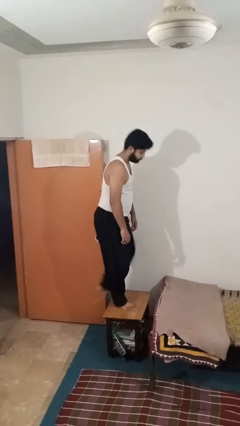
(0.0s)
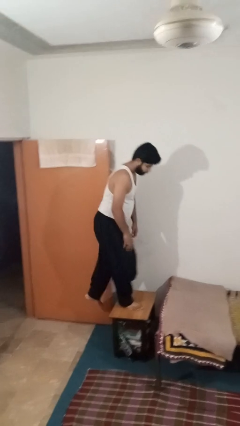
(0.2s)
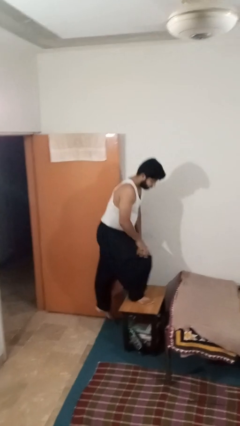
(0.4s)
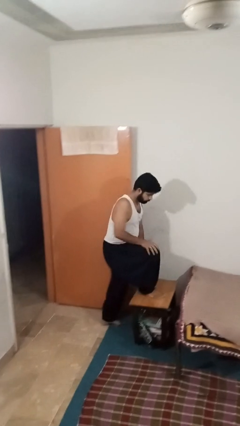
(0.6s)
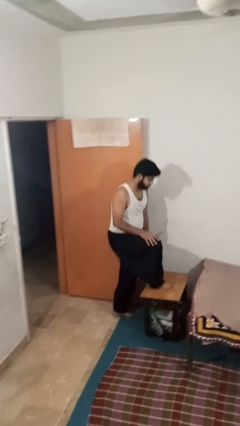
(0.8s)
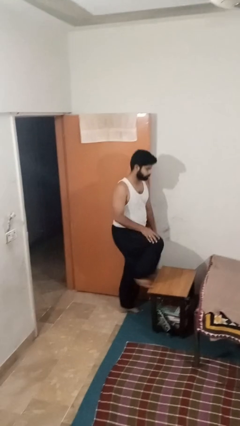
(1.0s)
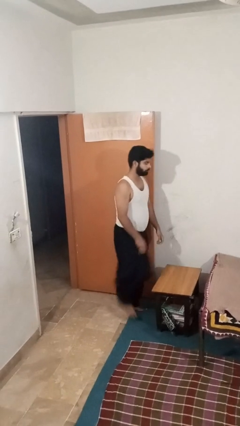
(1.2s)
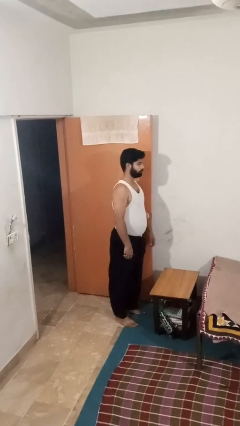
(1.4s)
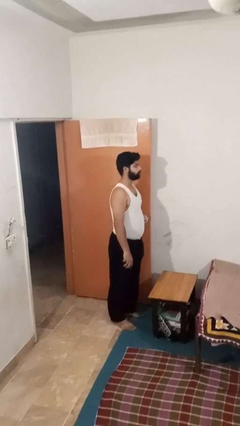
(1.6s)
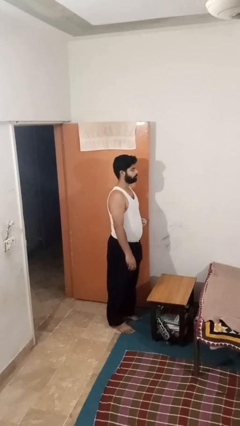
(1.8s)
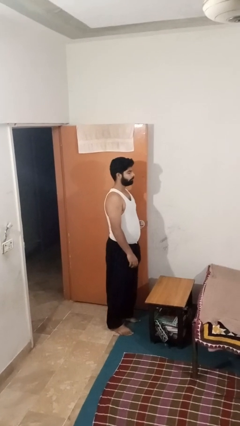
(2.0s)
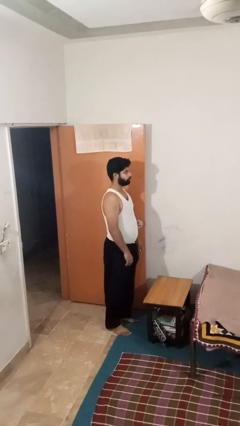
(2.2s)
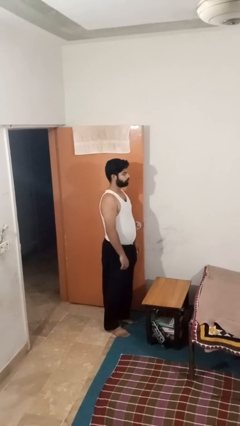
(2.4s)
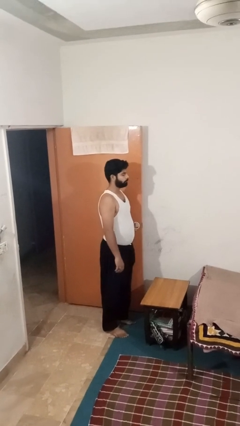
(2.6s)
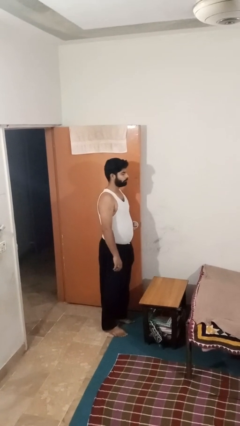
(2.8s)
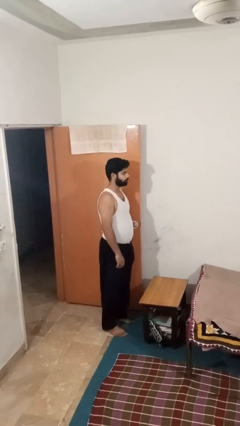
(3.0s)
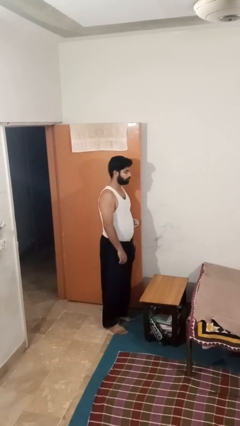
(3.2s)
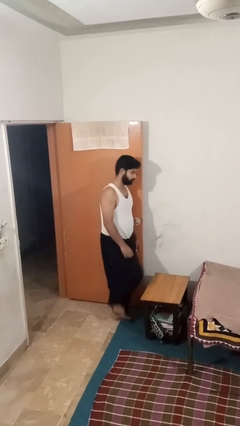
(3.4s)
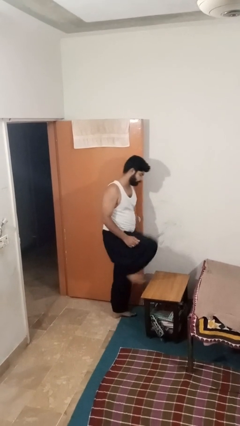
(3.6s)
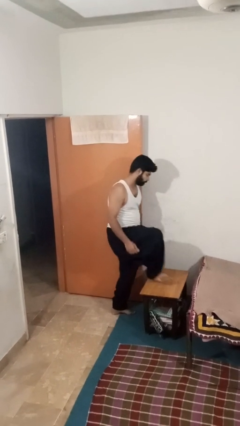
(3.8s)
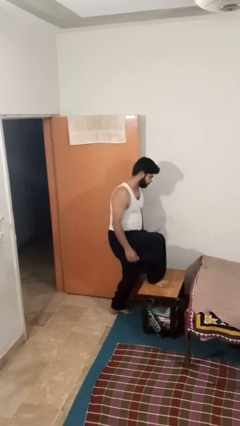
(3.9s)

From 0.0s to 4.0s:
person climbs off table

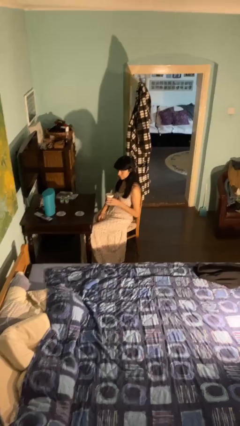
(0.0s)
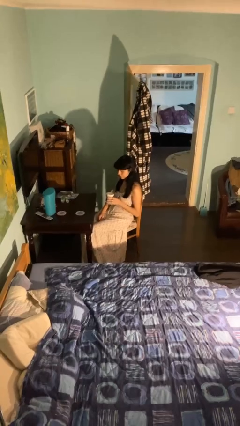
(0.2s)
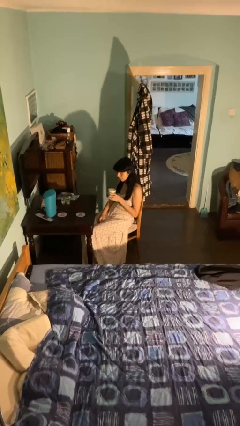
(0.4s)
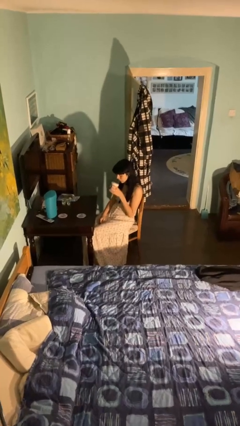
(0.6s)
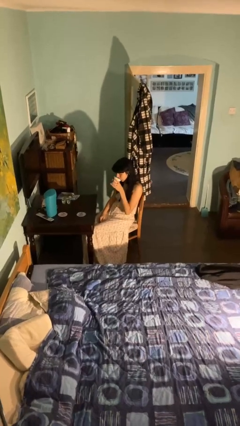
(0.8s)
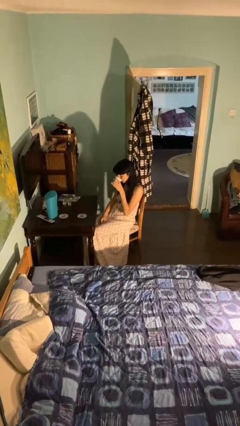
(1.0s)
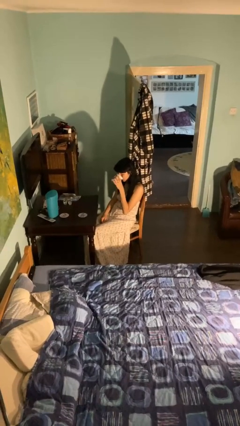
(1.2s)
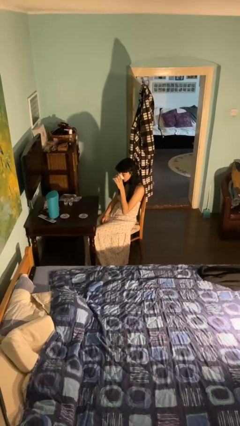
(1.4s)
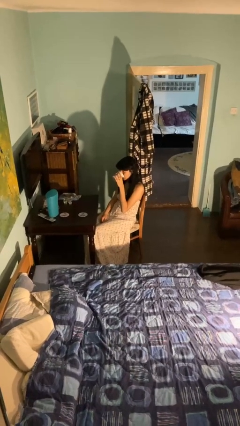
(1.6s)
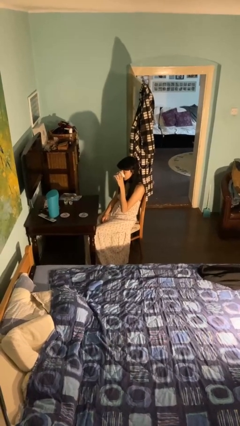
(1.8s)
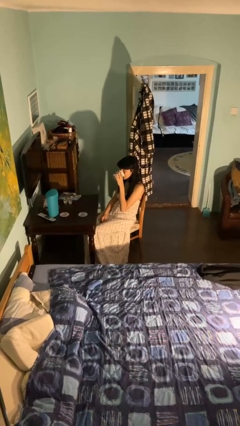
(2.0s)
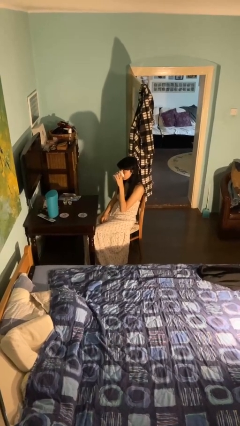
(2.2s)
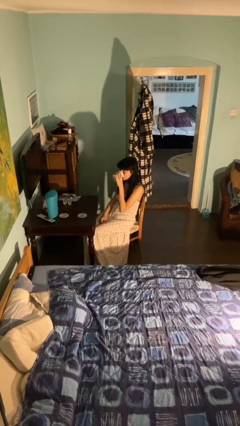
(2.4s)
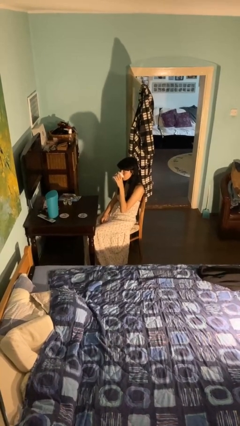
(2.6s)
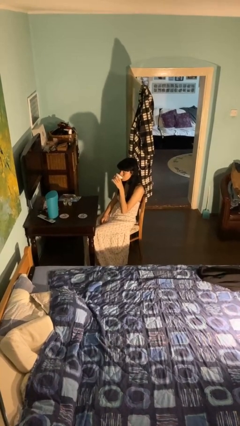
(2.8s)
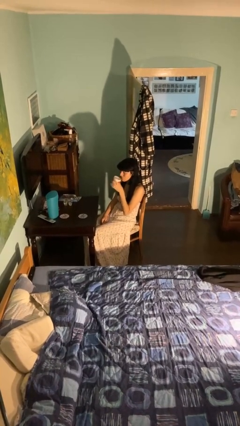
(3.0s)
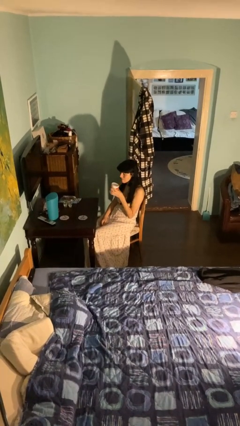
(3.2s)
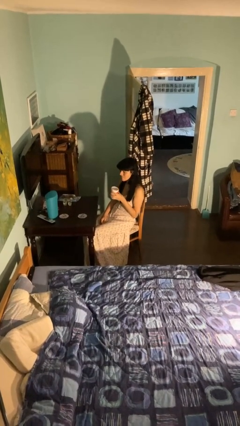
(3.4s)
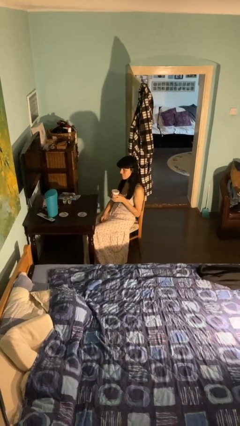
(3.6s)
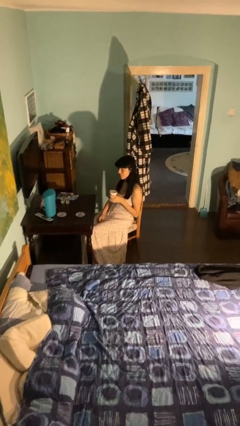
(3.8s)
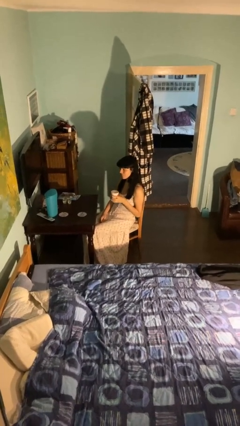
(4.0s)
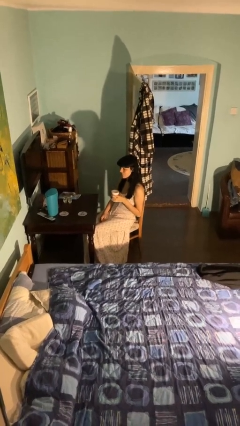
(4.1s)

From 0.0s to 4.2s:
person drinks from mug

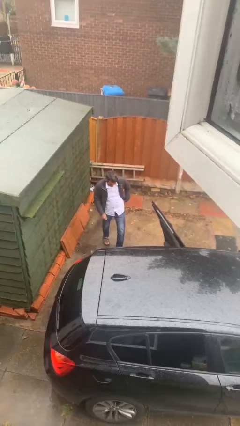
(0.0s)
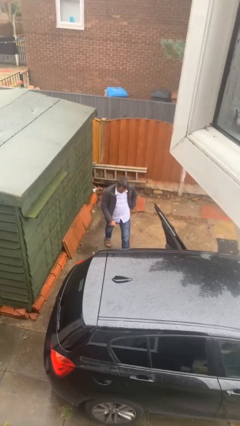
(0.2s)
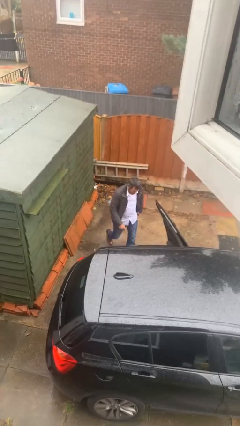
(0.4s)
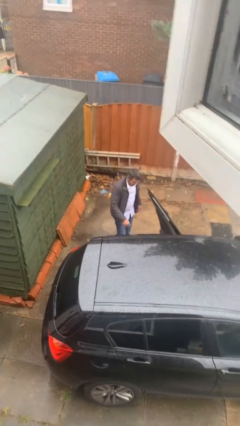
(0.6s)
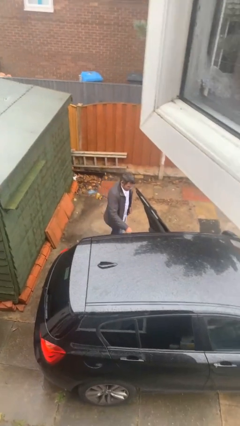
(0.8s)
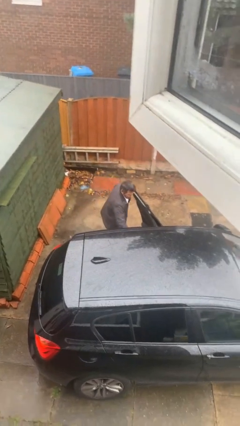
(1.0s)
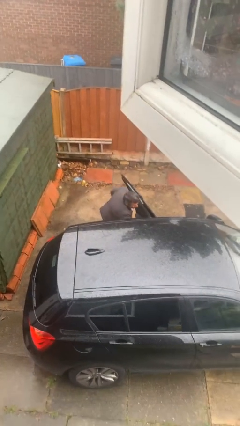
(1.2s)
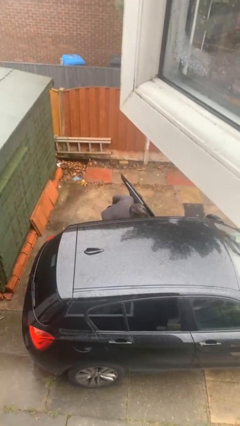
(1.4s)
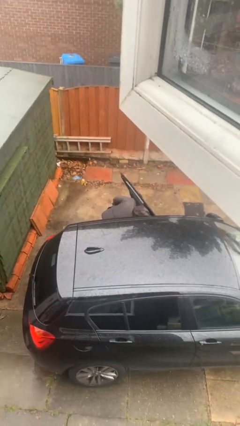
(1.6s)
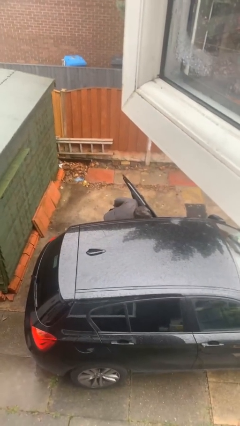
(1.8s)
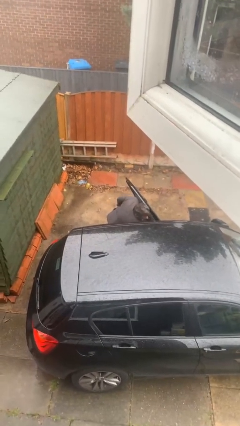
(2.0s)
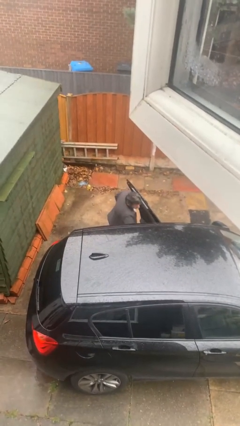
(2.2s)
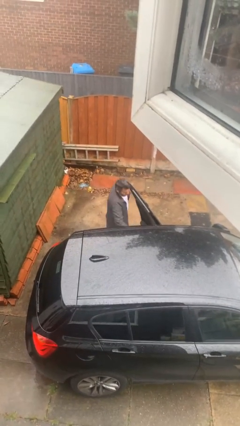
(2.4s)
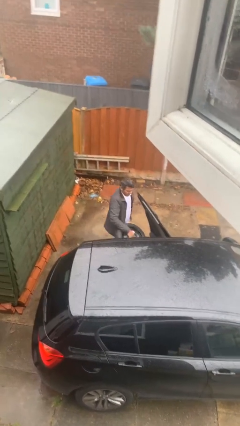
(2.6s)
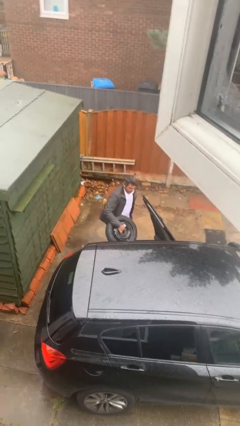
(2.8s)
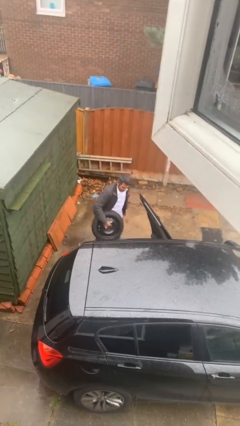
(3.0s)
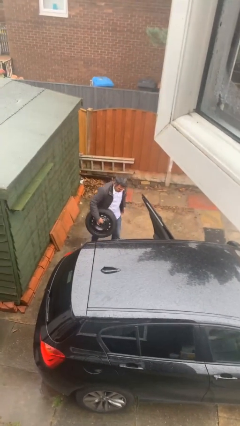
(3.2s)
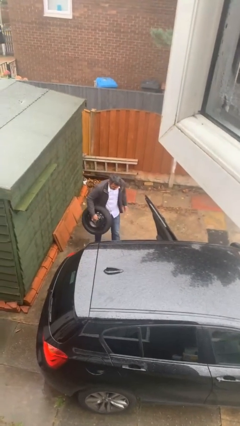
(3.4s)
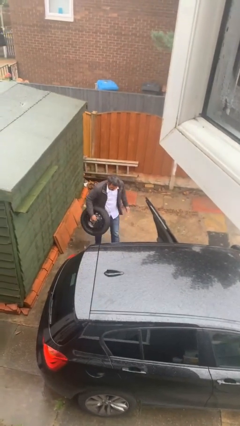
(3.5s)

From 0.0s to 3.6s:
person unloads car

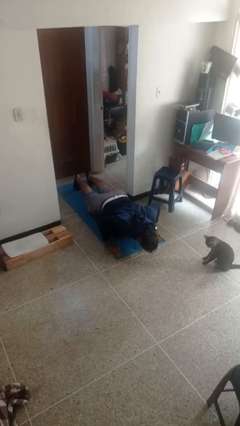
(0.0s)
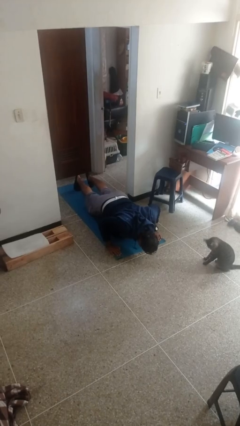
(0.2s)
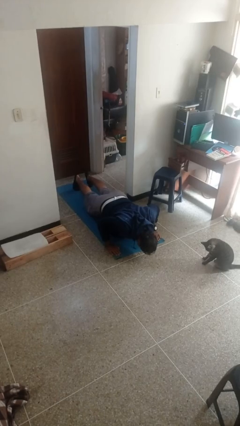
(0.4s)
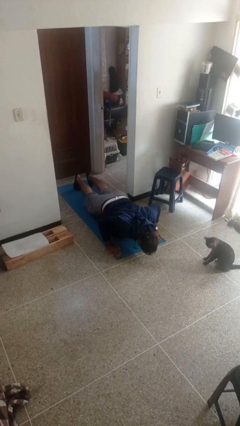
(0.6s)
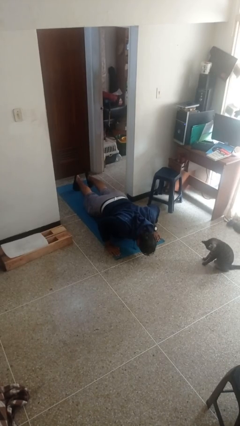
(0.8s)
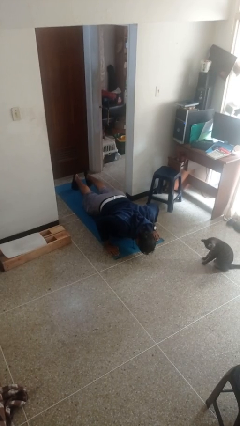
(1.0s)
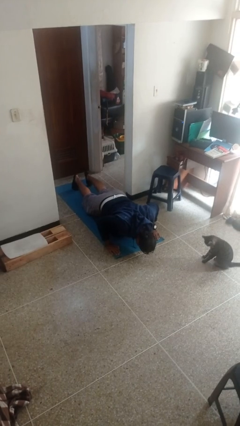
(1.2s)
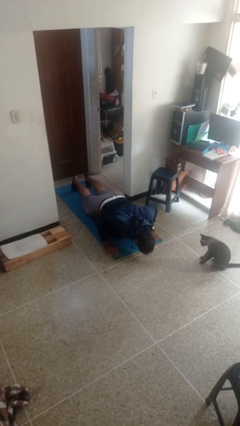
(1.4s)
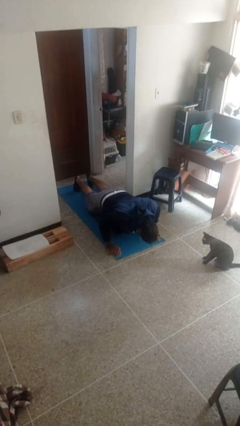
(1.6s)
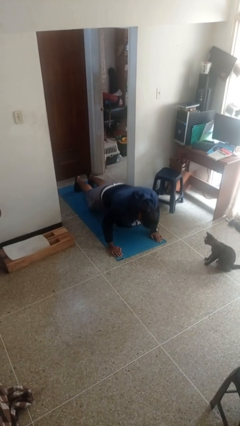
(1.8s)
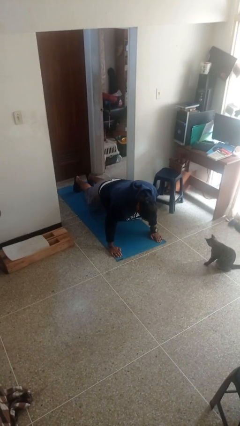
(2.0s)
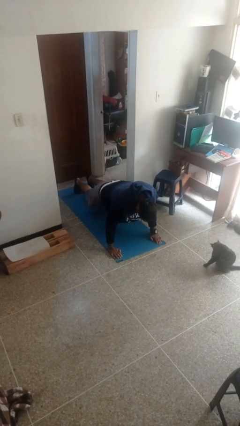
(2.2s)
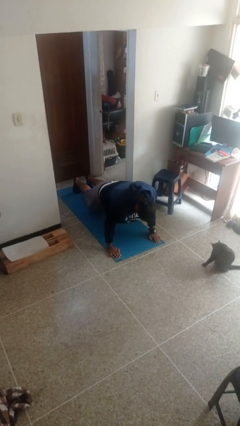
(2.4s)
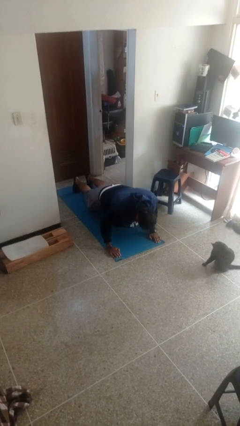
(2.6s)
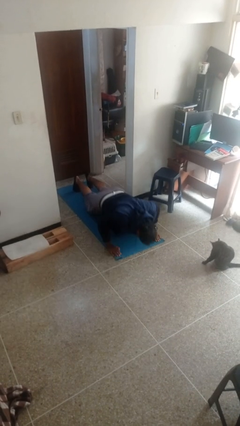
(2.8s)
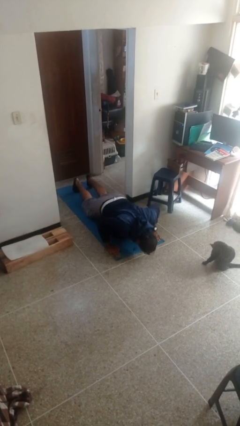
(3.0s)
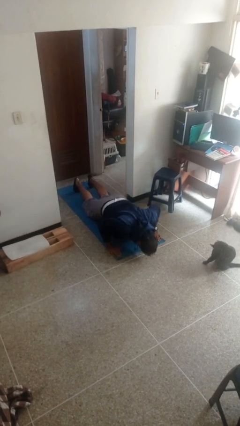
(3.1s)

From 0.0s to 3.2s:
person exercises with pushup

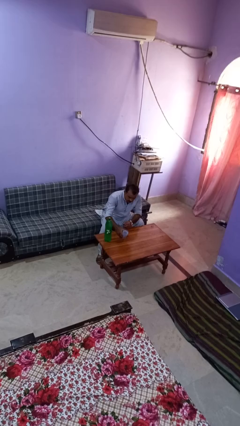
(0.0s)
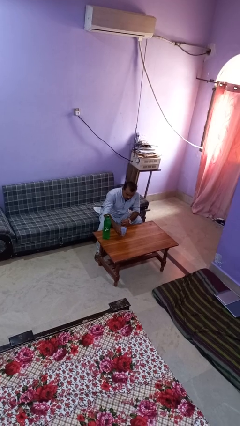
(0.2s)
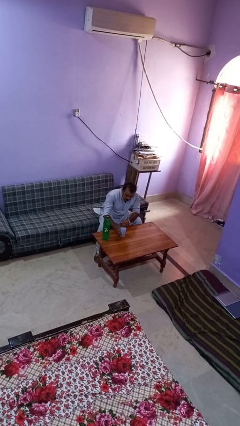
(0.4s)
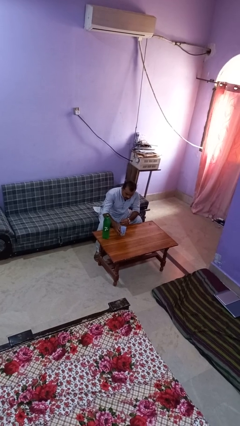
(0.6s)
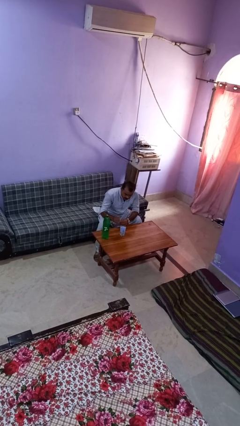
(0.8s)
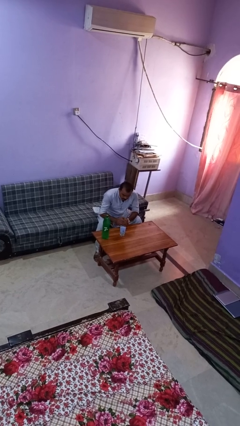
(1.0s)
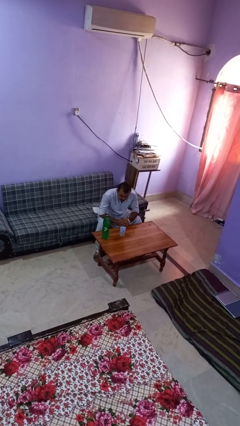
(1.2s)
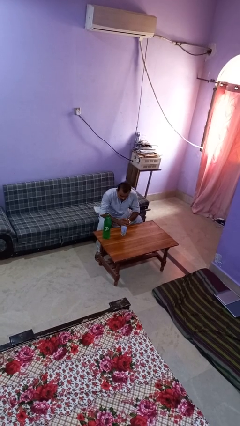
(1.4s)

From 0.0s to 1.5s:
person sets upright glass

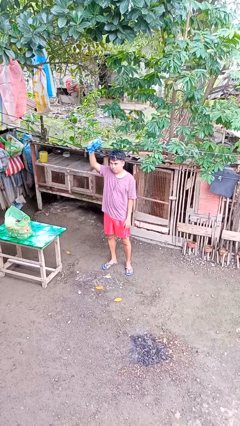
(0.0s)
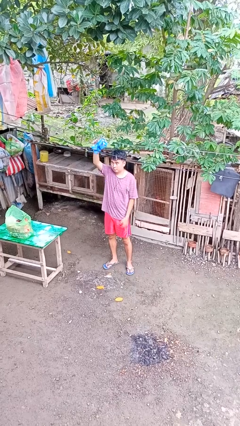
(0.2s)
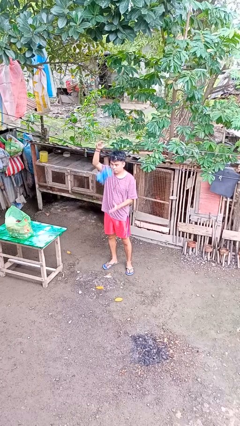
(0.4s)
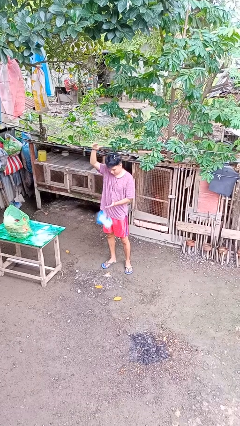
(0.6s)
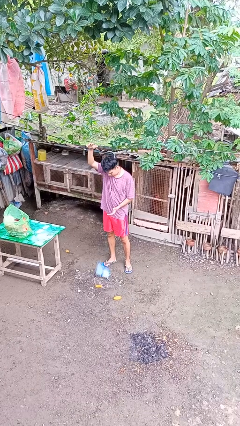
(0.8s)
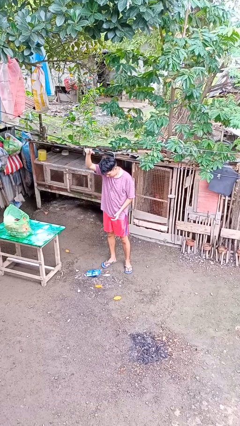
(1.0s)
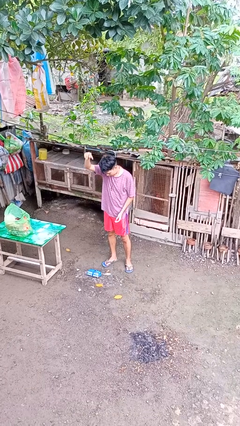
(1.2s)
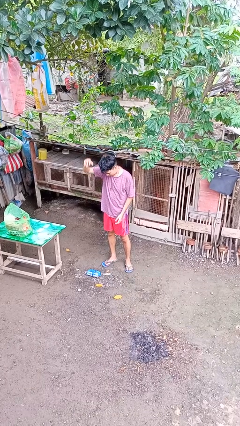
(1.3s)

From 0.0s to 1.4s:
person drops object
